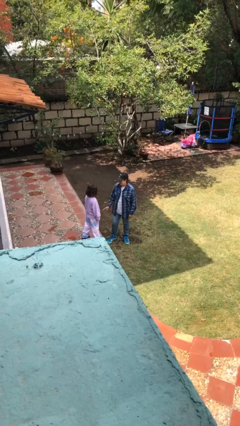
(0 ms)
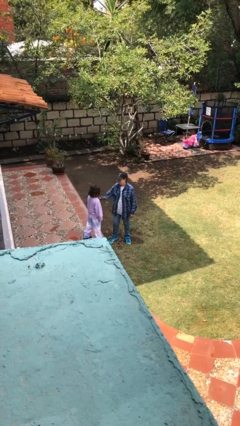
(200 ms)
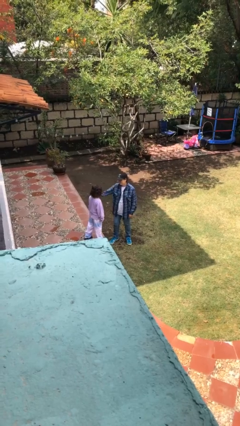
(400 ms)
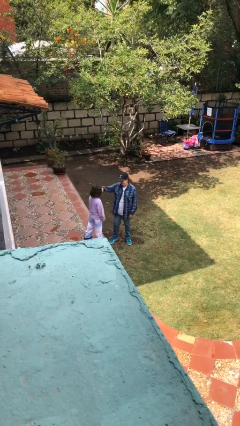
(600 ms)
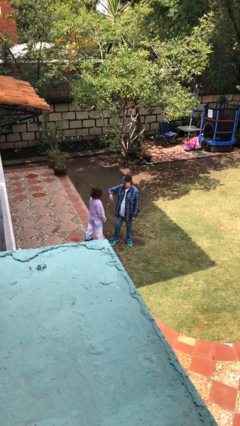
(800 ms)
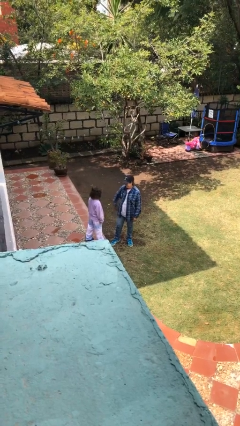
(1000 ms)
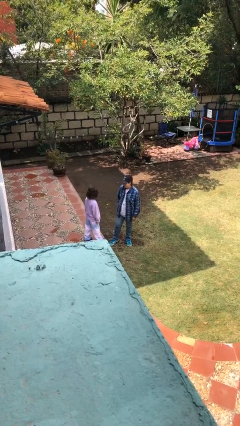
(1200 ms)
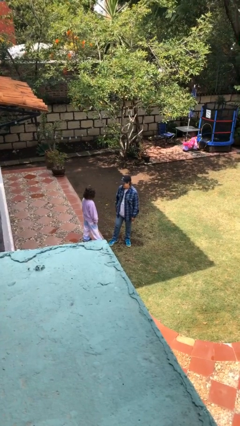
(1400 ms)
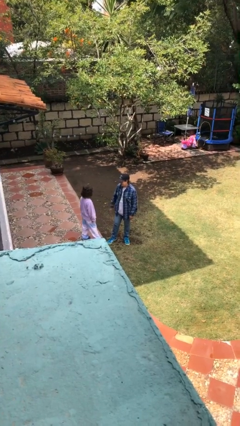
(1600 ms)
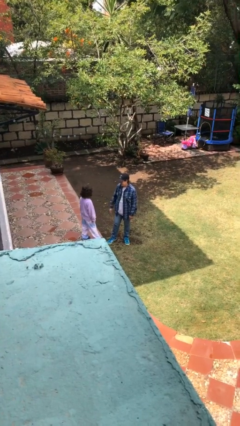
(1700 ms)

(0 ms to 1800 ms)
person shoves person

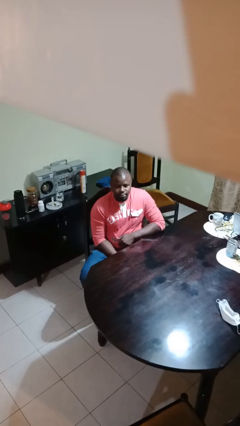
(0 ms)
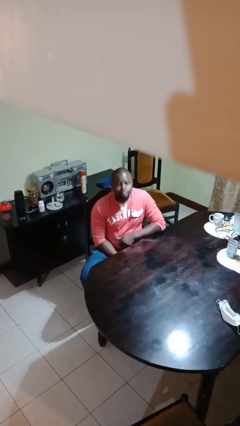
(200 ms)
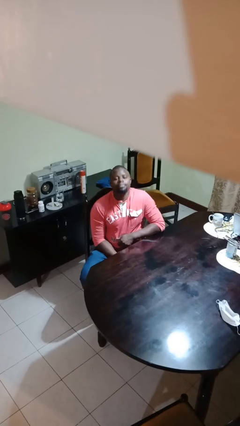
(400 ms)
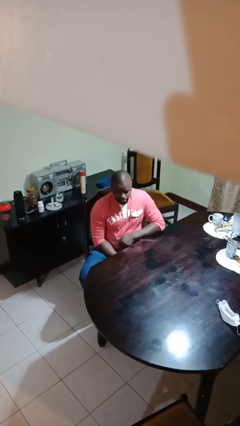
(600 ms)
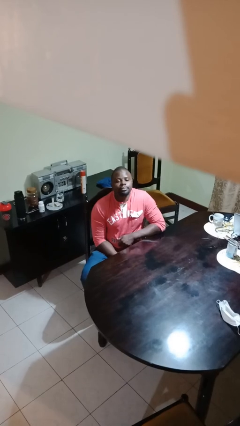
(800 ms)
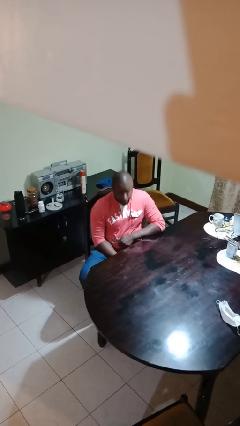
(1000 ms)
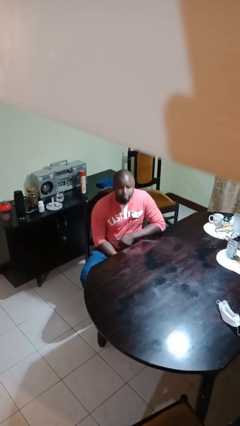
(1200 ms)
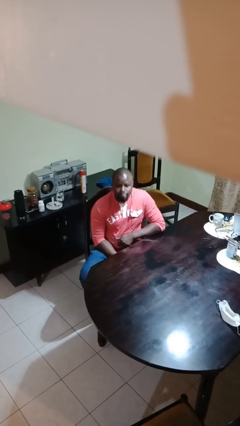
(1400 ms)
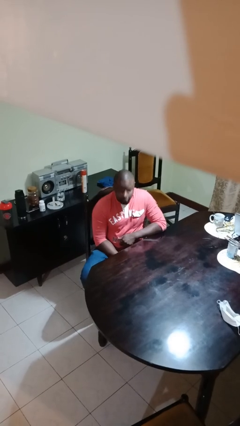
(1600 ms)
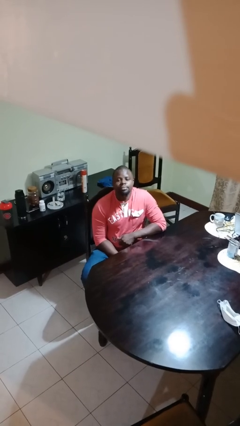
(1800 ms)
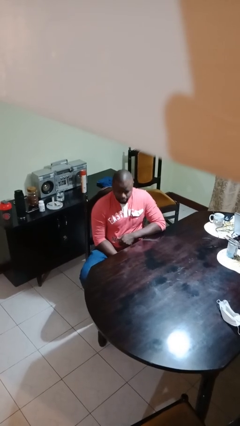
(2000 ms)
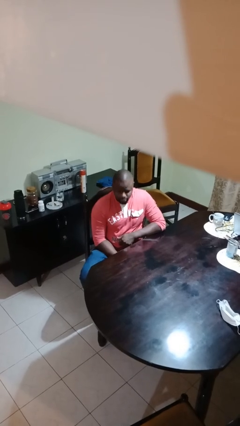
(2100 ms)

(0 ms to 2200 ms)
person nods head

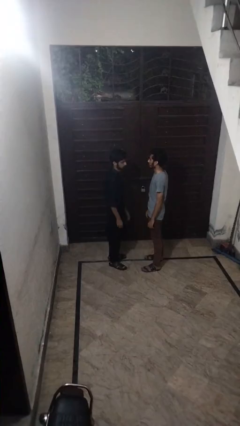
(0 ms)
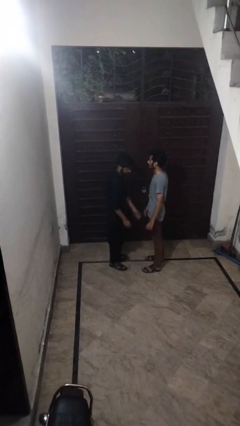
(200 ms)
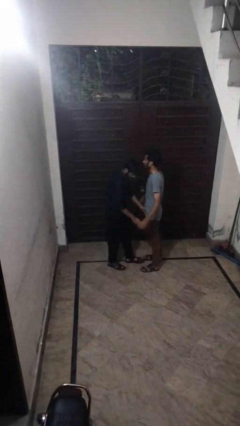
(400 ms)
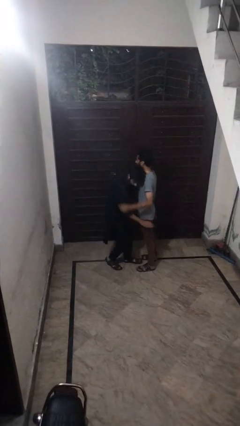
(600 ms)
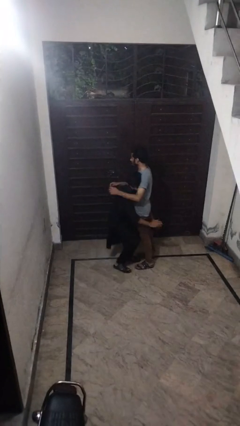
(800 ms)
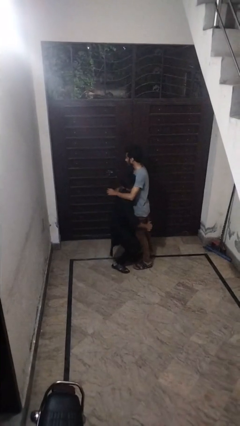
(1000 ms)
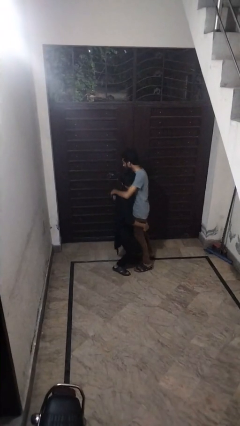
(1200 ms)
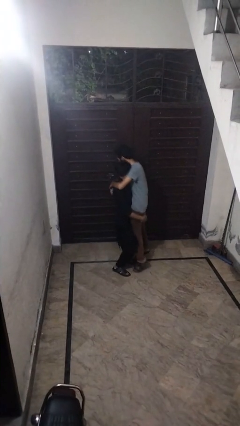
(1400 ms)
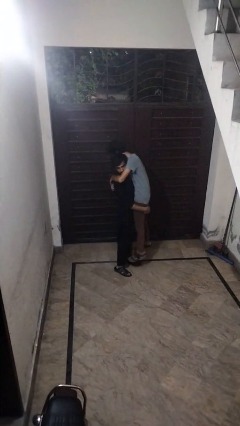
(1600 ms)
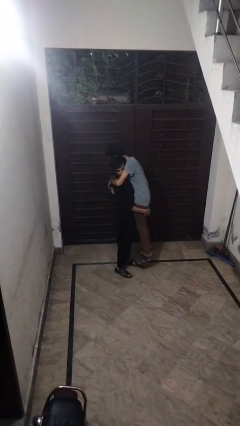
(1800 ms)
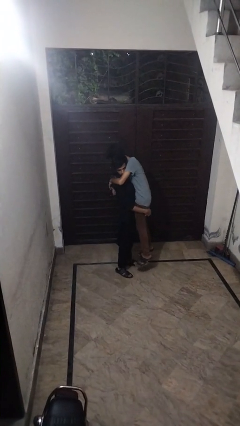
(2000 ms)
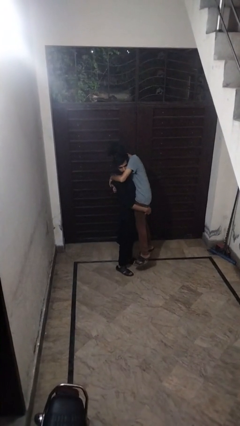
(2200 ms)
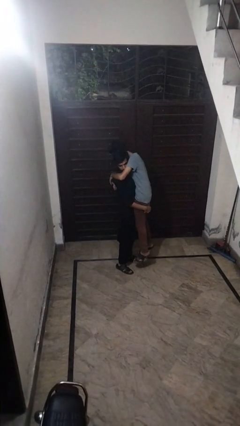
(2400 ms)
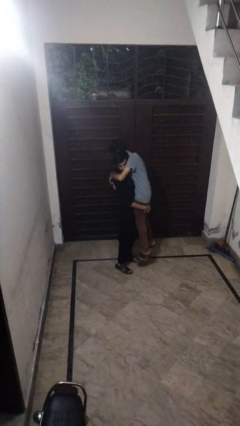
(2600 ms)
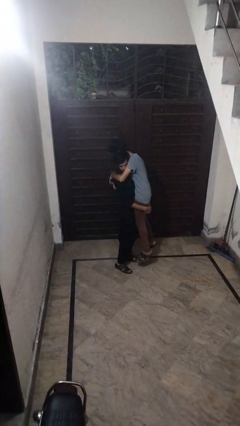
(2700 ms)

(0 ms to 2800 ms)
person picks up person

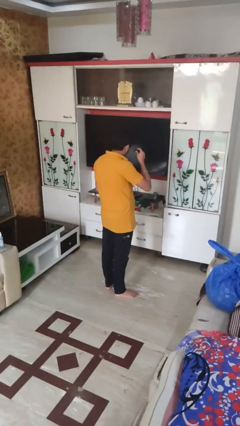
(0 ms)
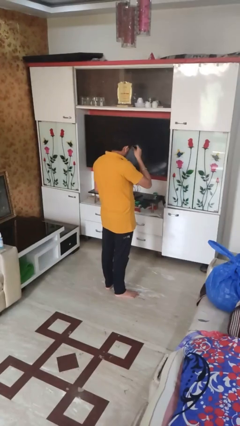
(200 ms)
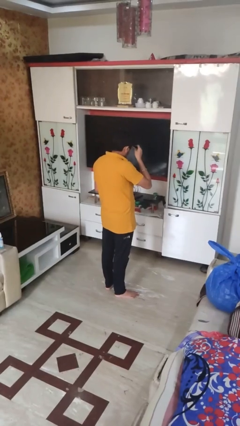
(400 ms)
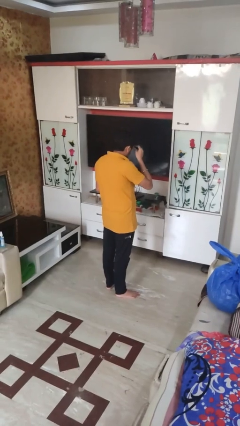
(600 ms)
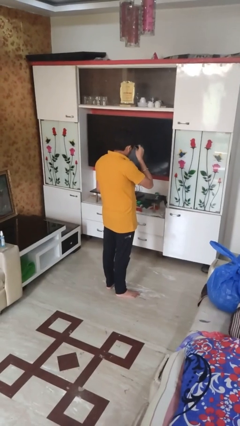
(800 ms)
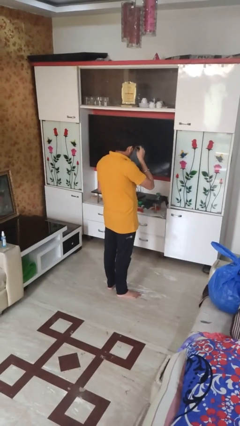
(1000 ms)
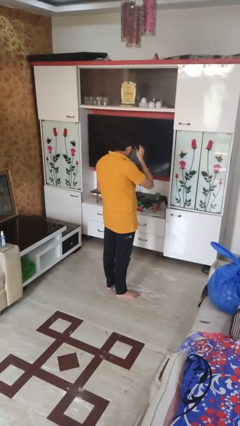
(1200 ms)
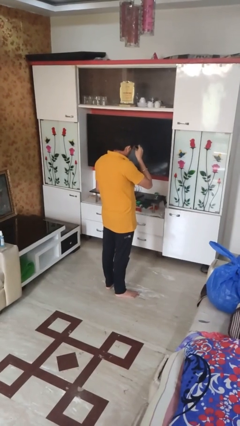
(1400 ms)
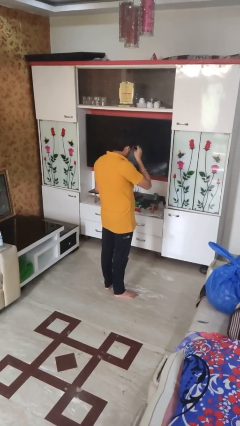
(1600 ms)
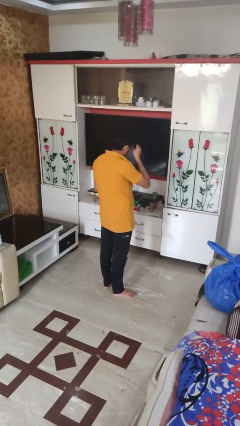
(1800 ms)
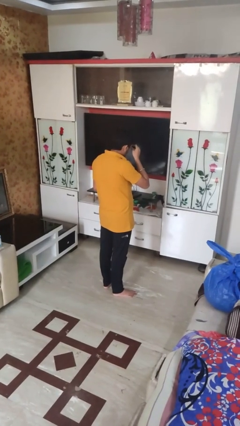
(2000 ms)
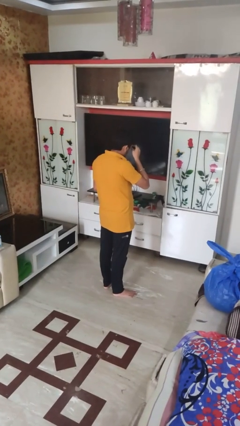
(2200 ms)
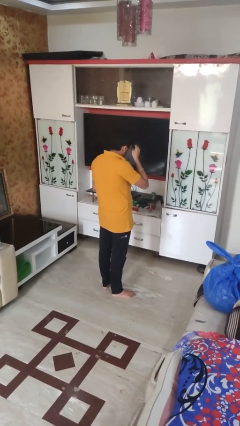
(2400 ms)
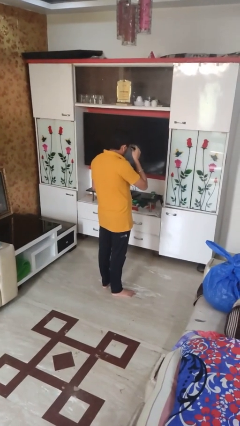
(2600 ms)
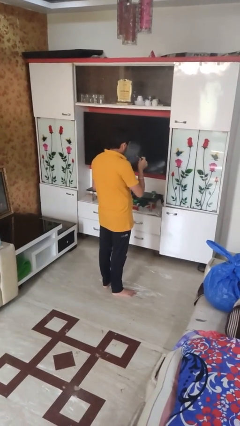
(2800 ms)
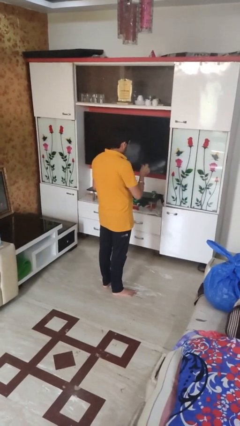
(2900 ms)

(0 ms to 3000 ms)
person applies eye makeup

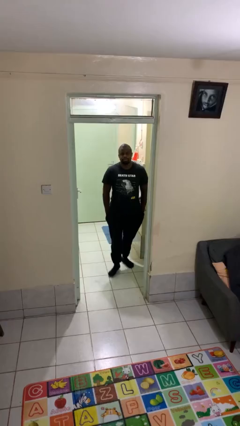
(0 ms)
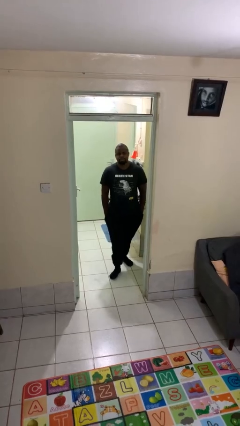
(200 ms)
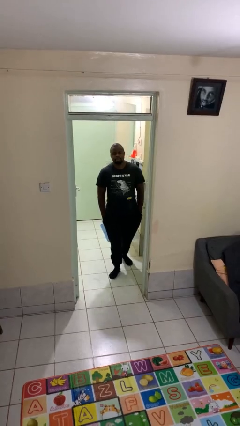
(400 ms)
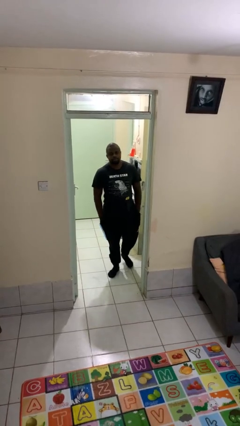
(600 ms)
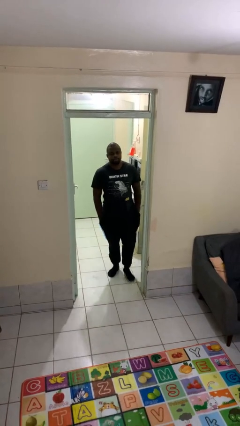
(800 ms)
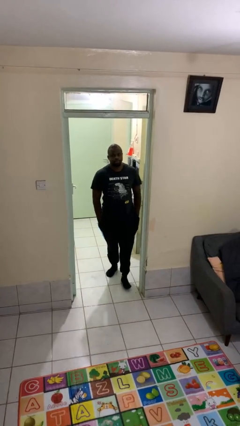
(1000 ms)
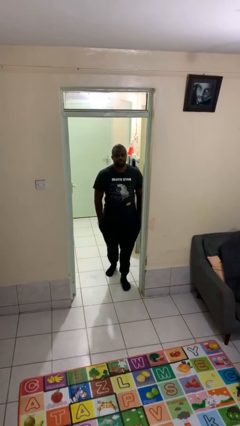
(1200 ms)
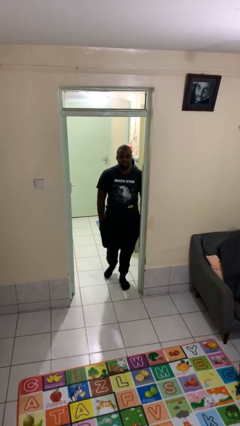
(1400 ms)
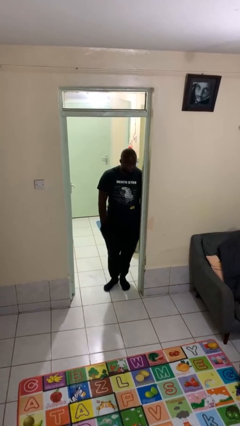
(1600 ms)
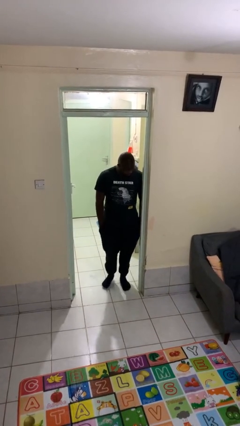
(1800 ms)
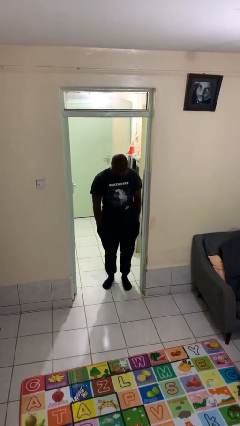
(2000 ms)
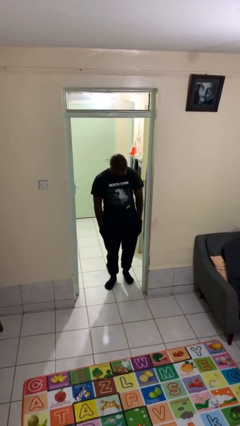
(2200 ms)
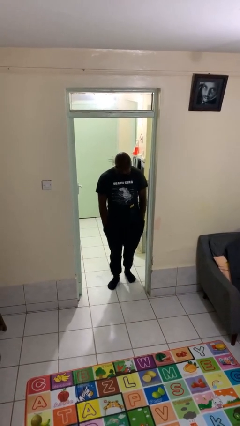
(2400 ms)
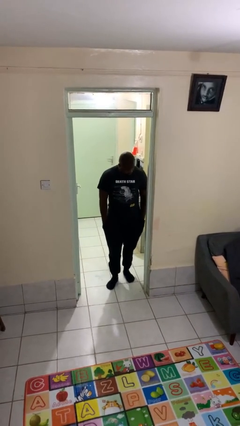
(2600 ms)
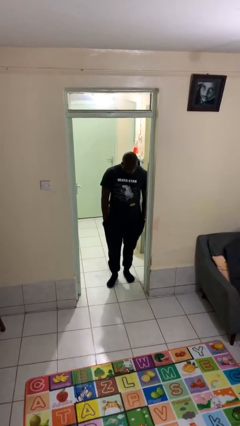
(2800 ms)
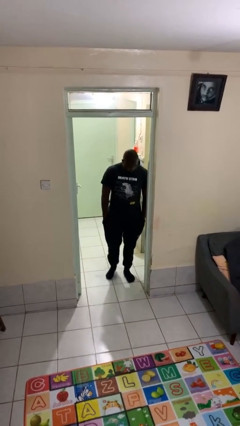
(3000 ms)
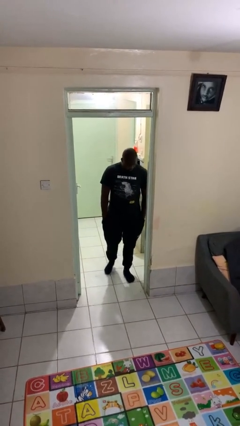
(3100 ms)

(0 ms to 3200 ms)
person bumps into wall

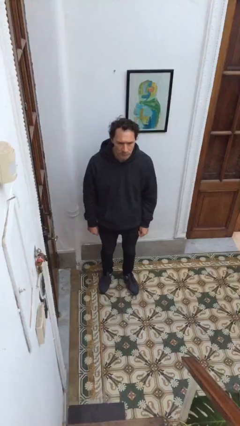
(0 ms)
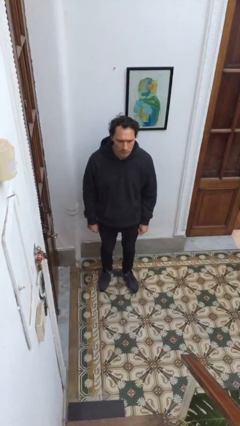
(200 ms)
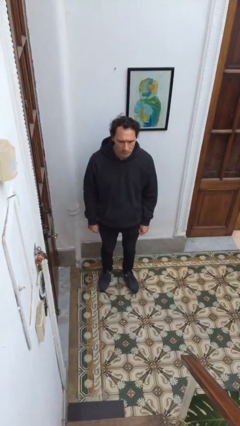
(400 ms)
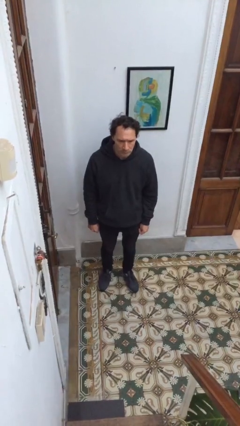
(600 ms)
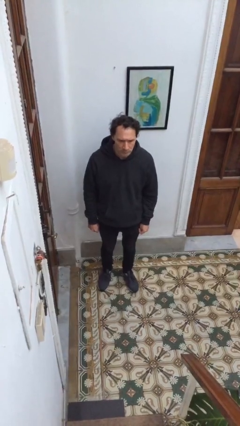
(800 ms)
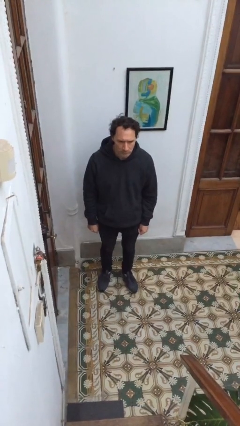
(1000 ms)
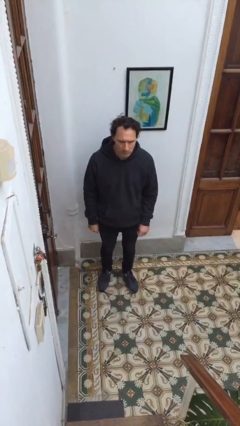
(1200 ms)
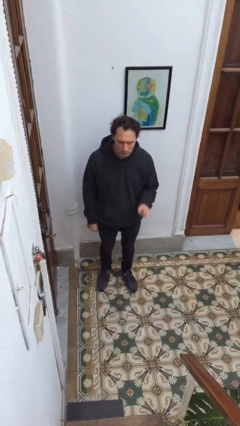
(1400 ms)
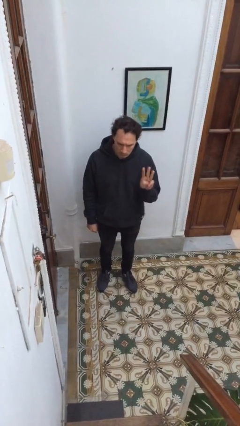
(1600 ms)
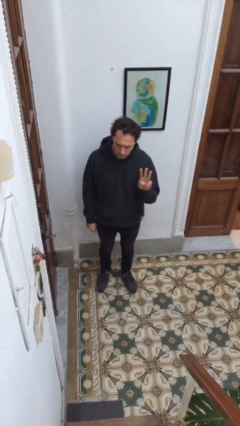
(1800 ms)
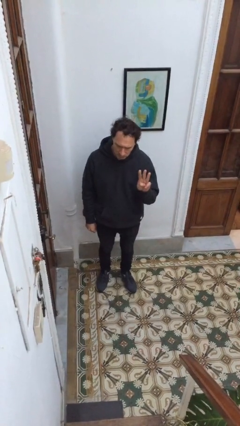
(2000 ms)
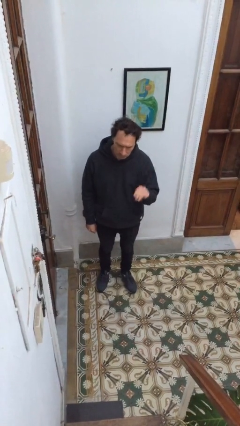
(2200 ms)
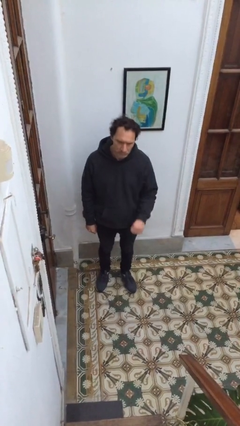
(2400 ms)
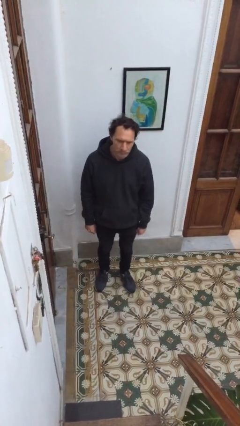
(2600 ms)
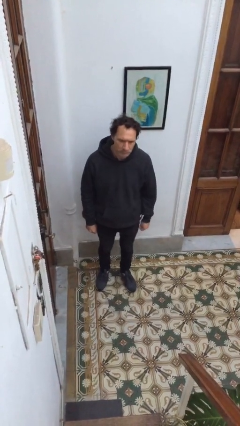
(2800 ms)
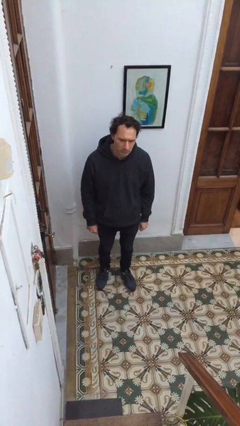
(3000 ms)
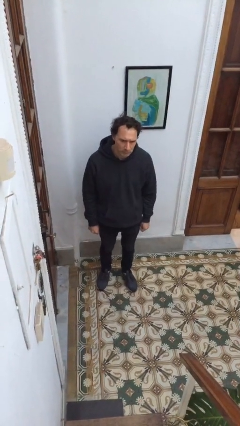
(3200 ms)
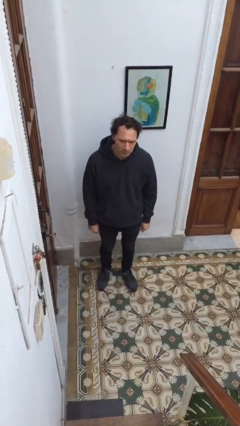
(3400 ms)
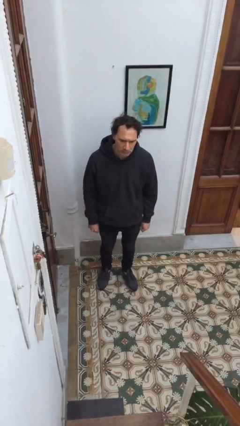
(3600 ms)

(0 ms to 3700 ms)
person gestures number three

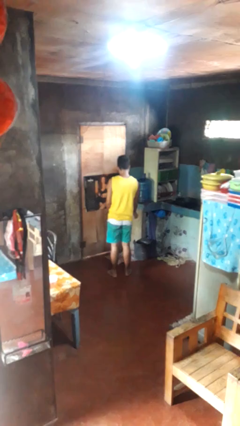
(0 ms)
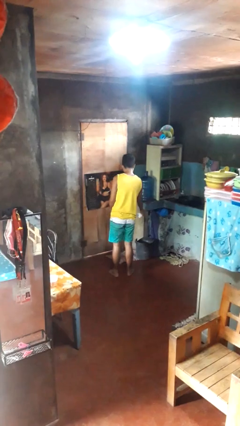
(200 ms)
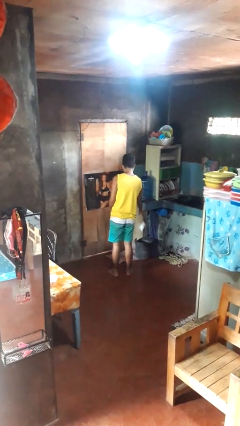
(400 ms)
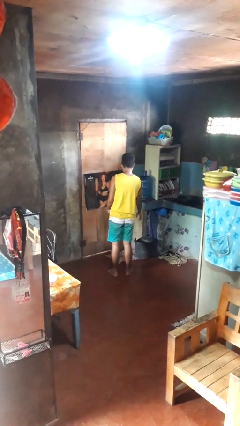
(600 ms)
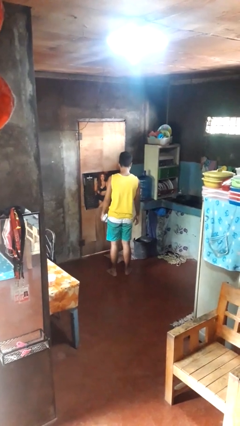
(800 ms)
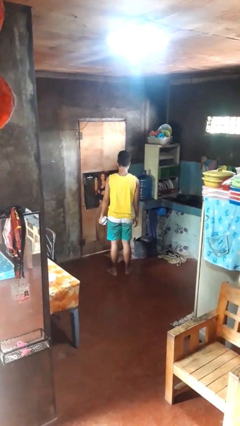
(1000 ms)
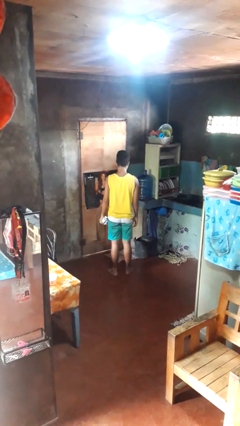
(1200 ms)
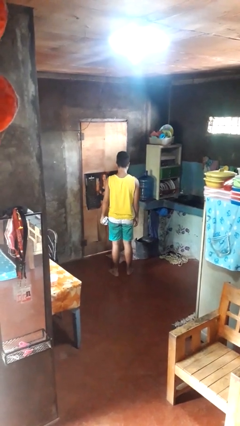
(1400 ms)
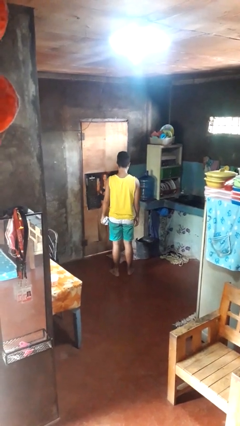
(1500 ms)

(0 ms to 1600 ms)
person discards trash
